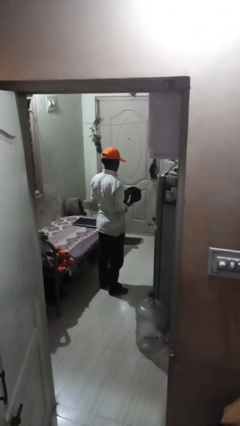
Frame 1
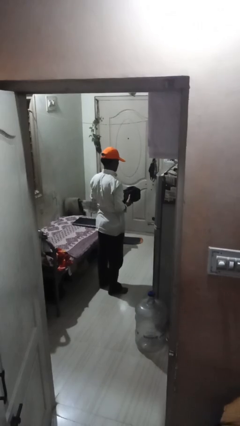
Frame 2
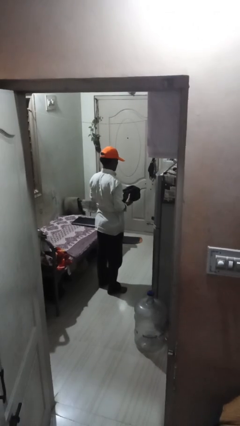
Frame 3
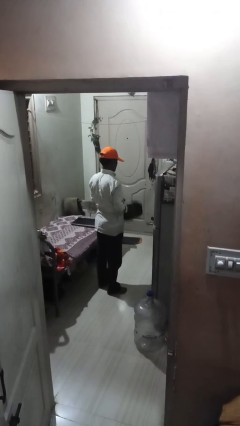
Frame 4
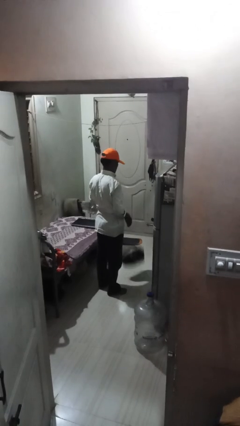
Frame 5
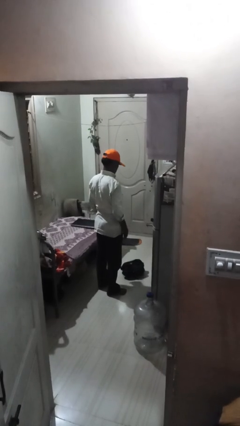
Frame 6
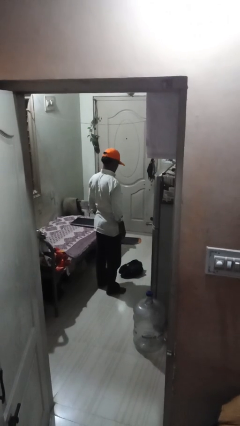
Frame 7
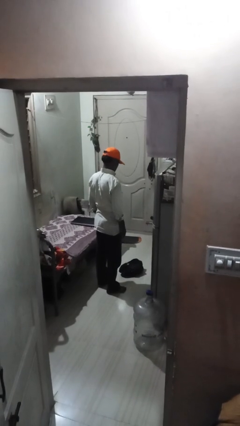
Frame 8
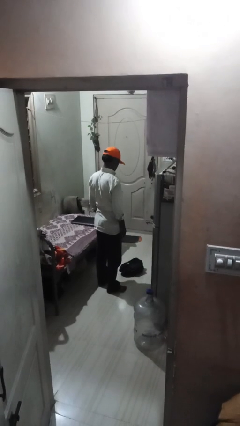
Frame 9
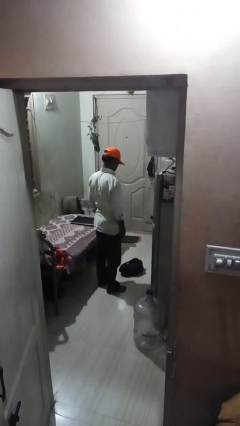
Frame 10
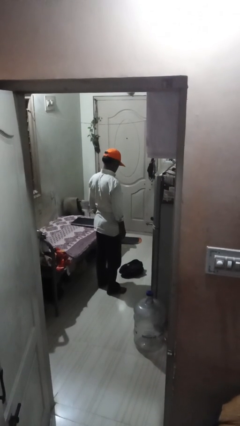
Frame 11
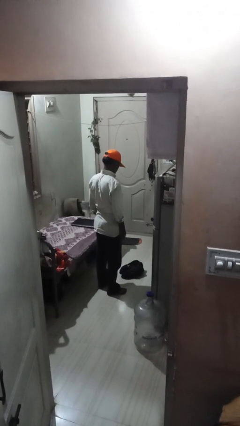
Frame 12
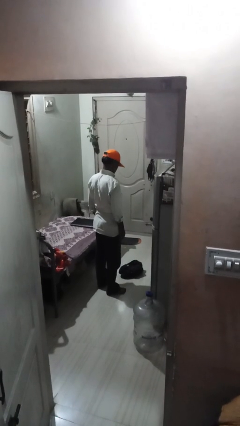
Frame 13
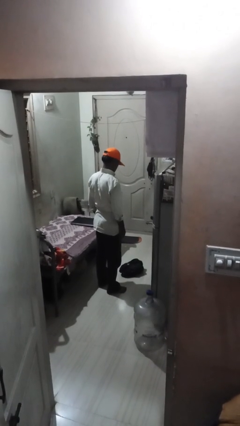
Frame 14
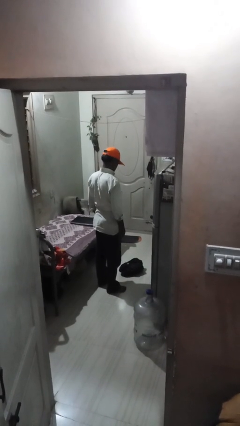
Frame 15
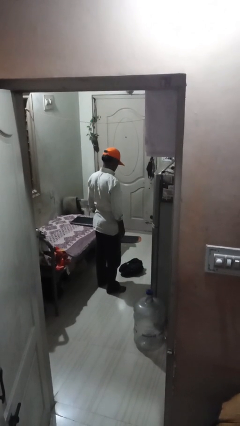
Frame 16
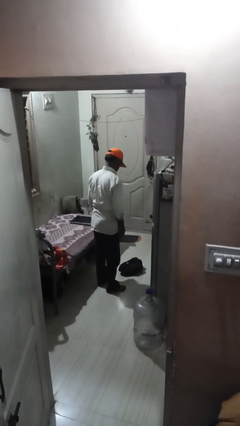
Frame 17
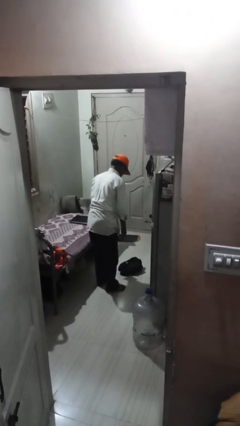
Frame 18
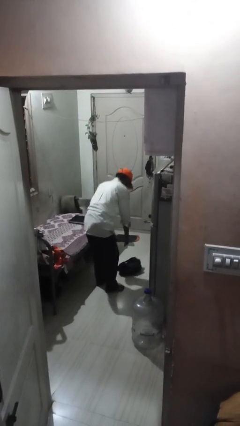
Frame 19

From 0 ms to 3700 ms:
person drops object

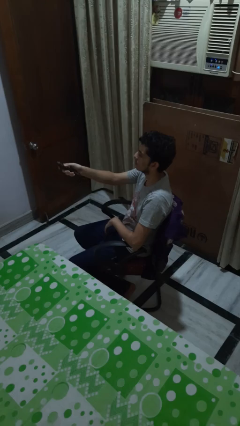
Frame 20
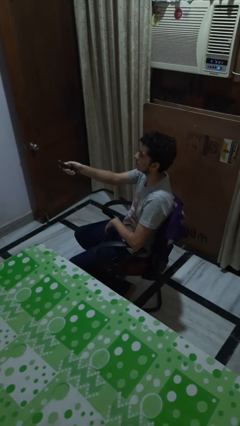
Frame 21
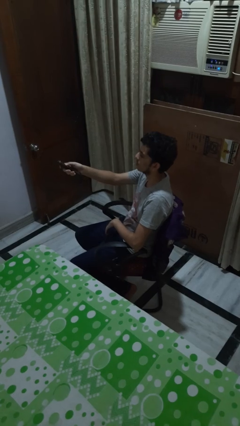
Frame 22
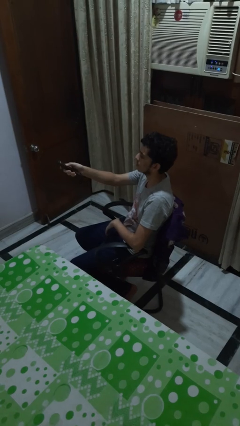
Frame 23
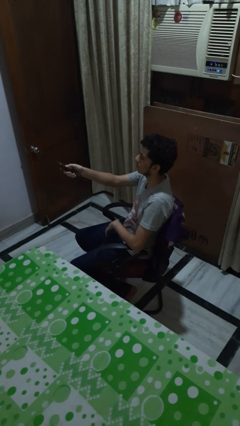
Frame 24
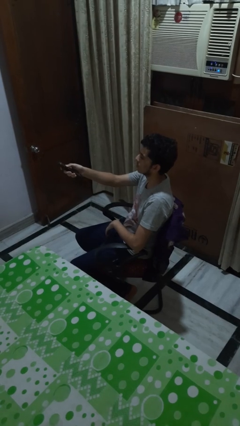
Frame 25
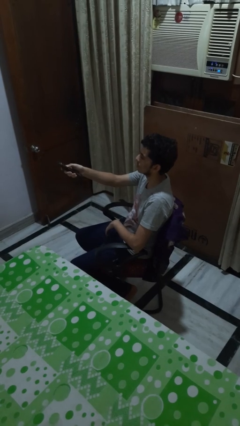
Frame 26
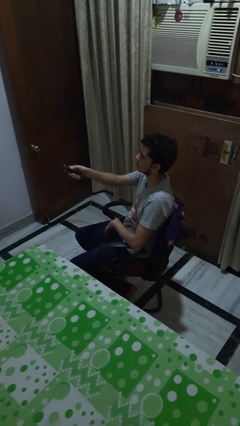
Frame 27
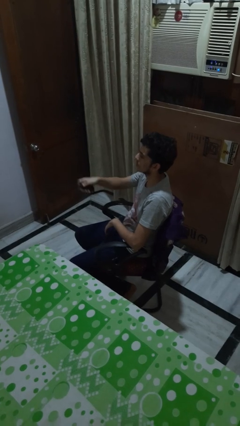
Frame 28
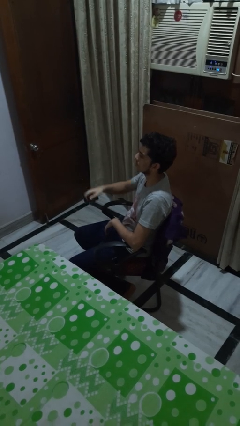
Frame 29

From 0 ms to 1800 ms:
person uses television remote

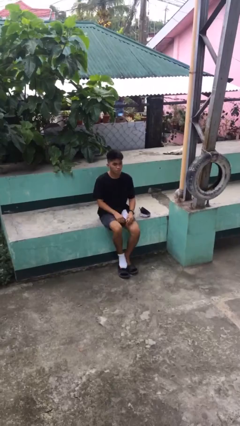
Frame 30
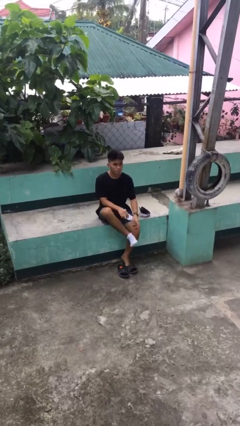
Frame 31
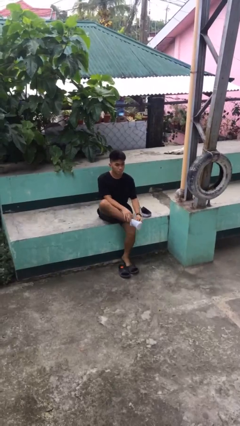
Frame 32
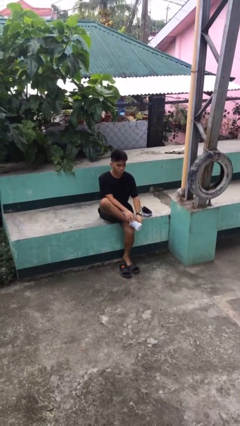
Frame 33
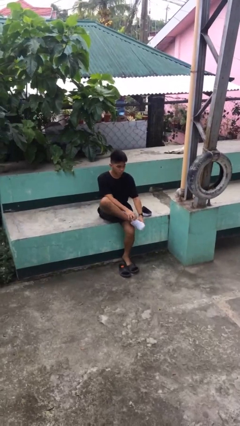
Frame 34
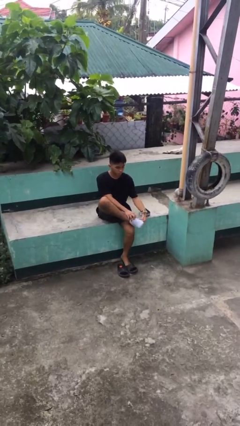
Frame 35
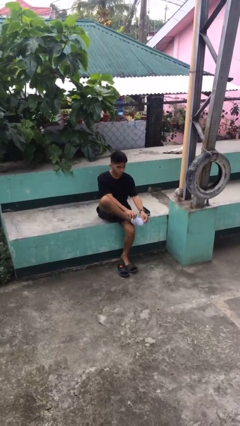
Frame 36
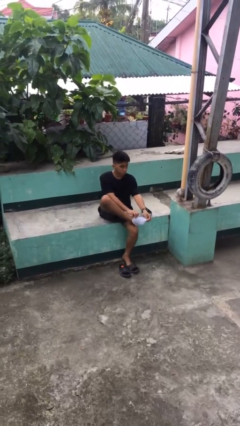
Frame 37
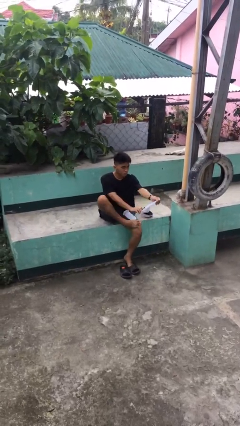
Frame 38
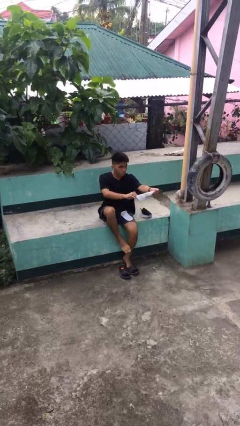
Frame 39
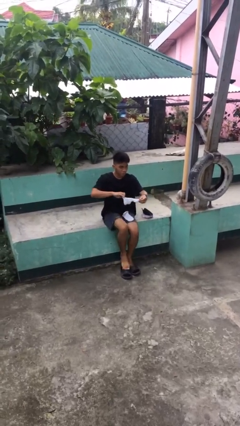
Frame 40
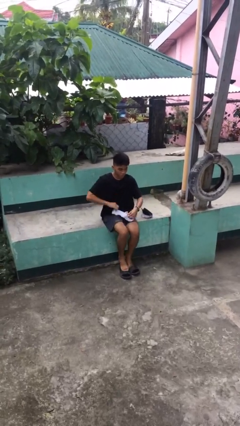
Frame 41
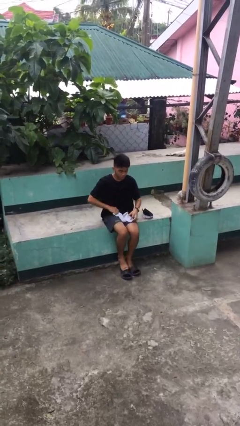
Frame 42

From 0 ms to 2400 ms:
person takes off socks

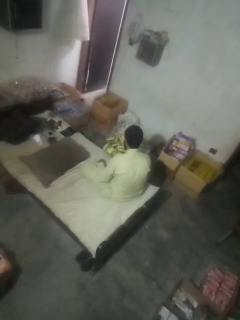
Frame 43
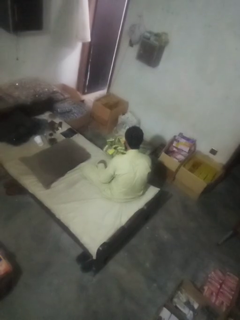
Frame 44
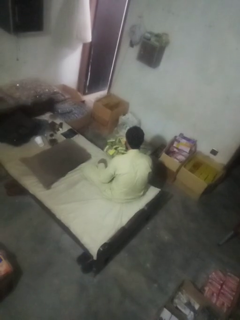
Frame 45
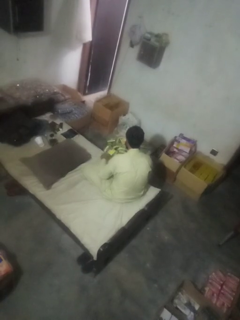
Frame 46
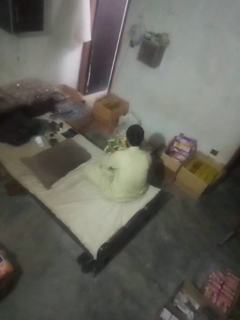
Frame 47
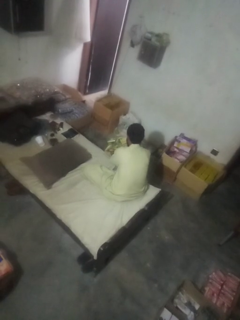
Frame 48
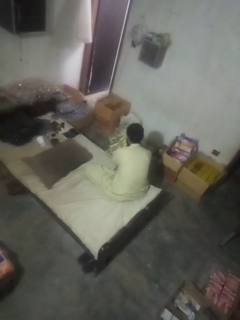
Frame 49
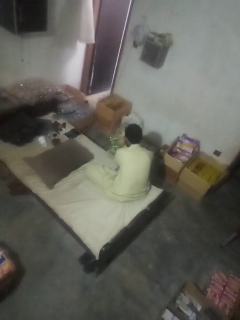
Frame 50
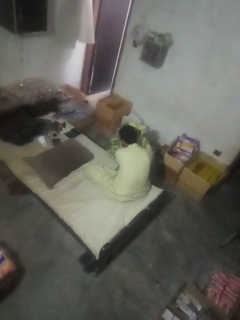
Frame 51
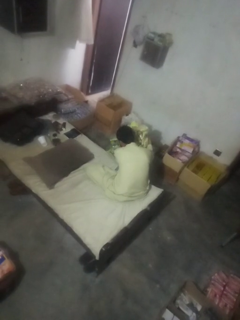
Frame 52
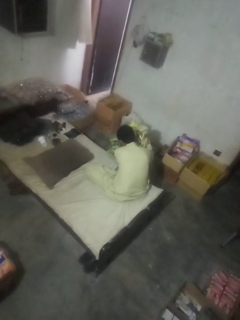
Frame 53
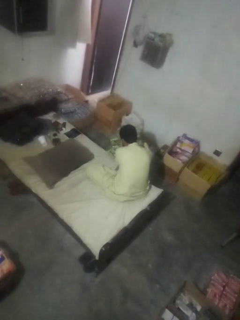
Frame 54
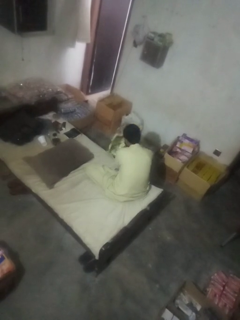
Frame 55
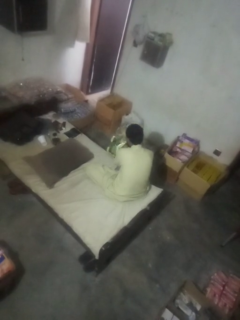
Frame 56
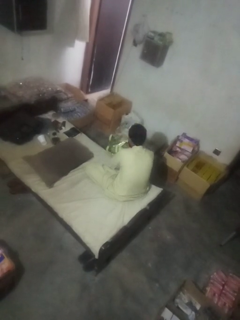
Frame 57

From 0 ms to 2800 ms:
person searches in box

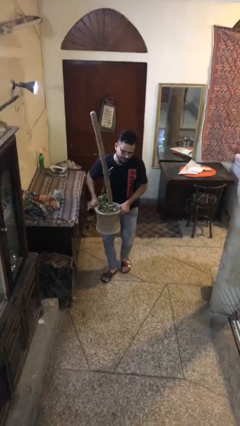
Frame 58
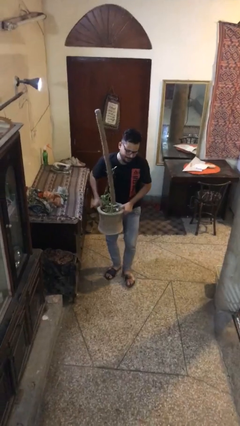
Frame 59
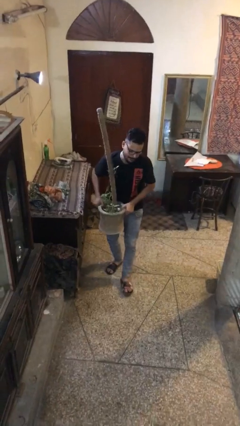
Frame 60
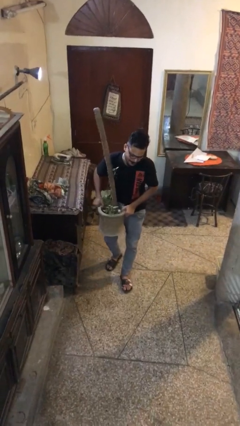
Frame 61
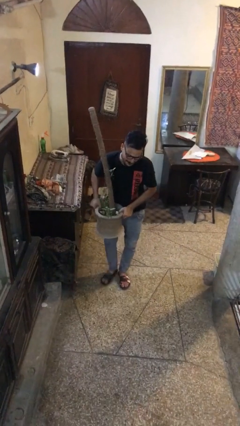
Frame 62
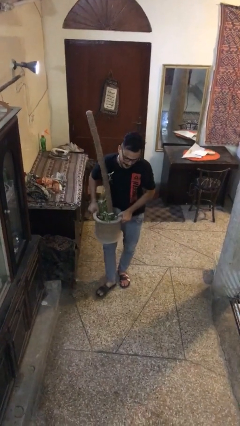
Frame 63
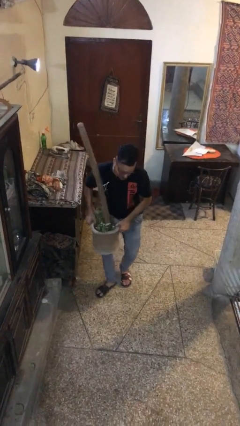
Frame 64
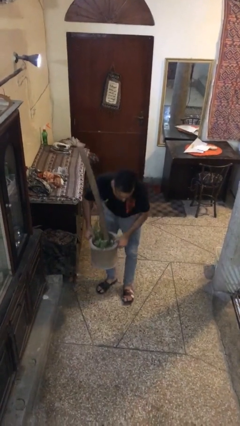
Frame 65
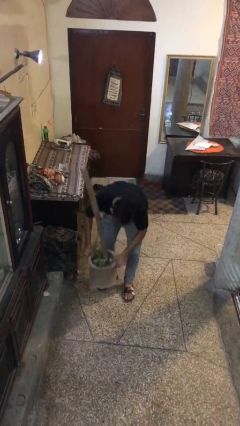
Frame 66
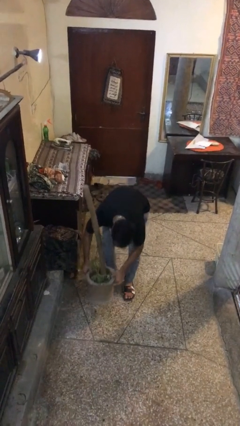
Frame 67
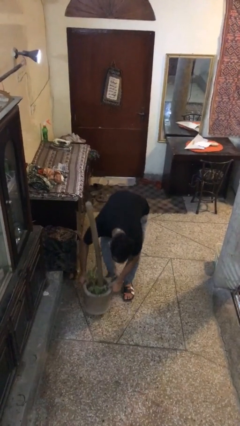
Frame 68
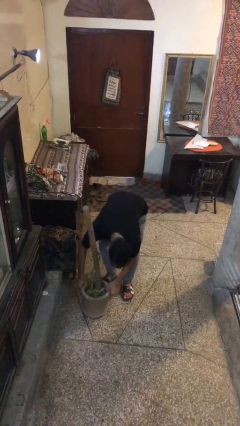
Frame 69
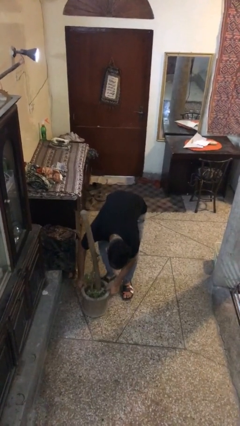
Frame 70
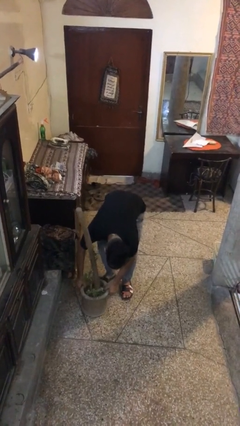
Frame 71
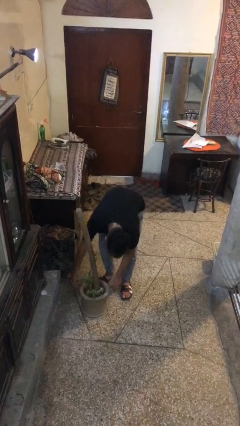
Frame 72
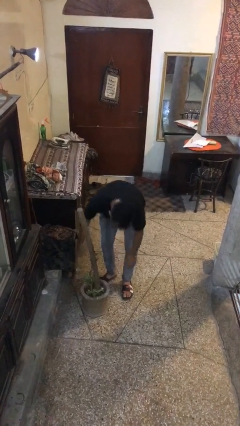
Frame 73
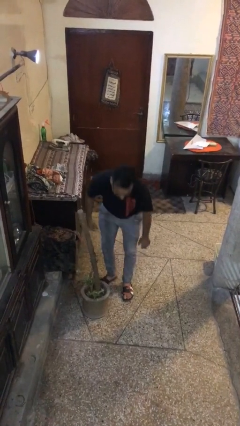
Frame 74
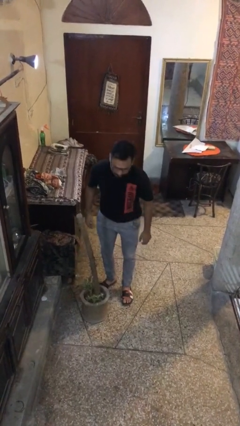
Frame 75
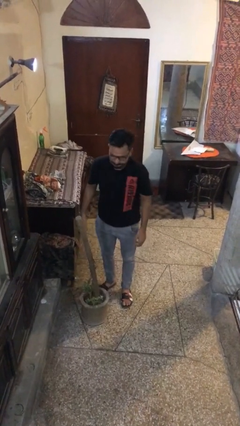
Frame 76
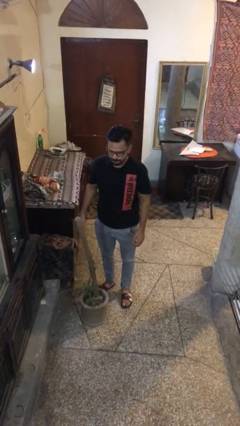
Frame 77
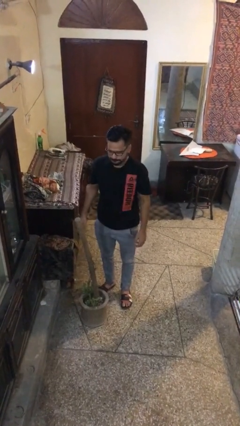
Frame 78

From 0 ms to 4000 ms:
person puts down object on floor

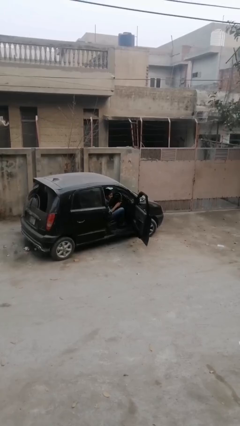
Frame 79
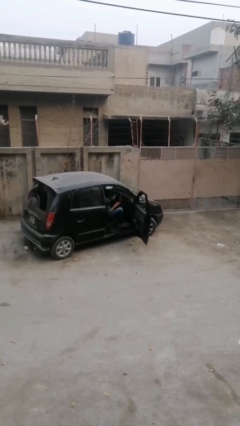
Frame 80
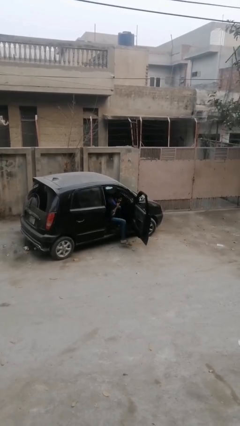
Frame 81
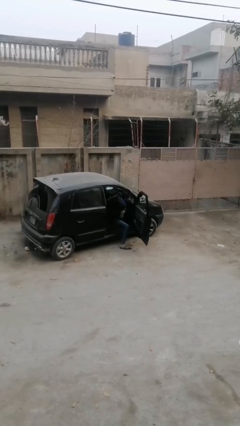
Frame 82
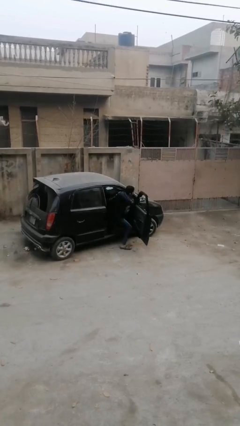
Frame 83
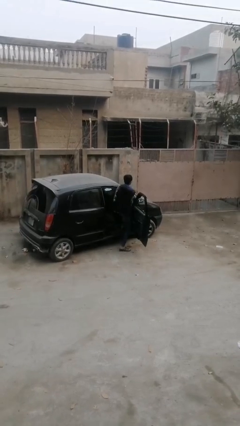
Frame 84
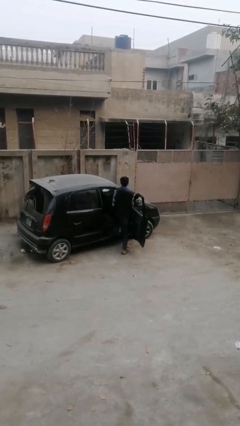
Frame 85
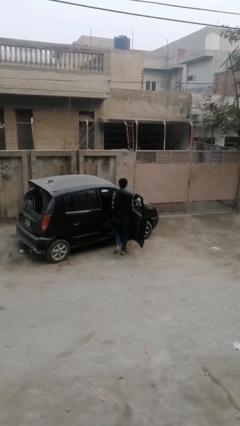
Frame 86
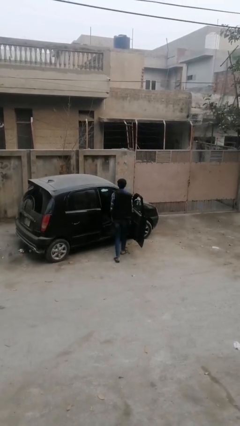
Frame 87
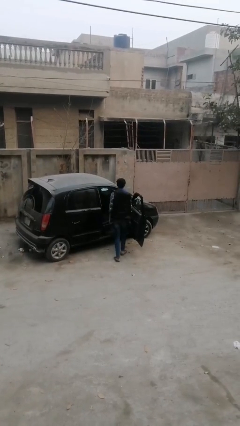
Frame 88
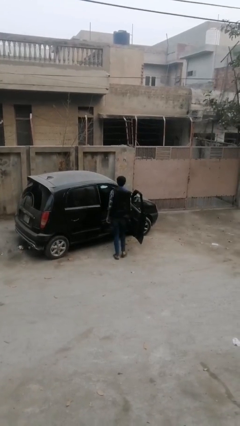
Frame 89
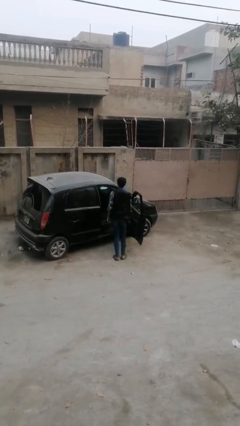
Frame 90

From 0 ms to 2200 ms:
person exits car

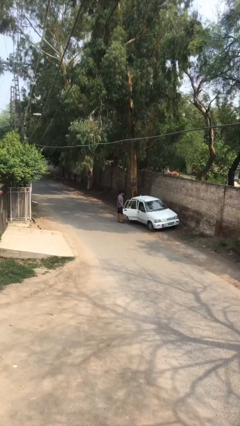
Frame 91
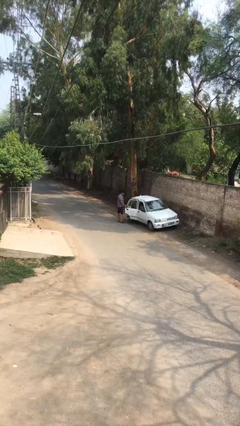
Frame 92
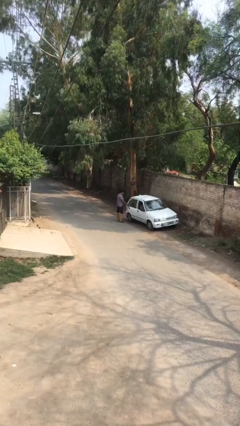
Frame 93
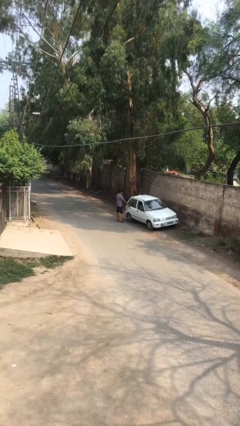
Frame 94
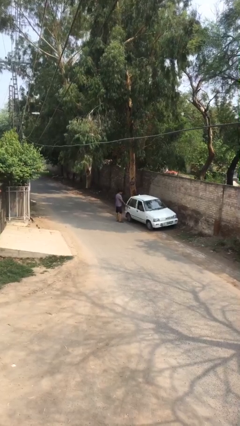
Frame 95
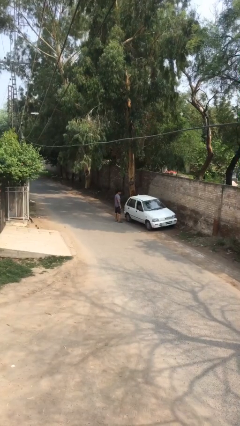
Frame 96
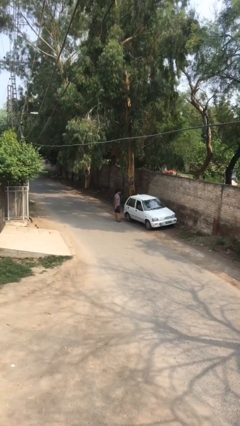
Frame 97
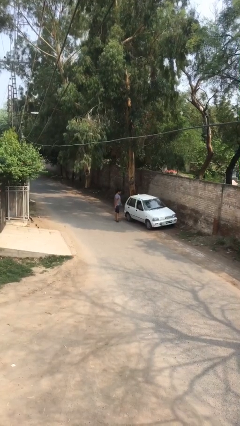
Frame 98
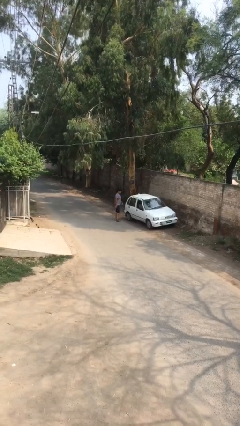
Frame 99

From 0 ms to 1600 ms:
person closes car door
